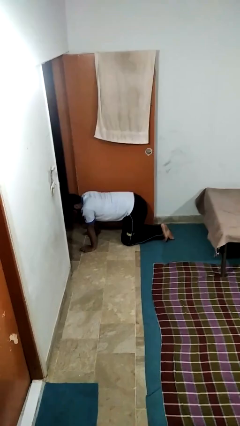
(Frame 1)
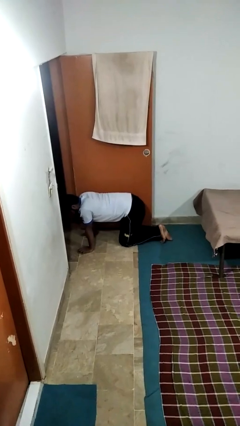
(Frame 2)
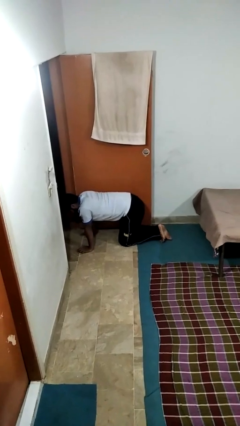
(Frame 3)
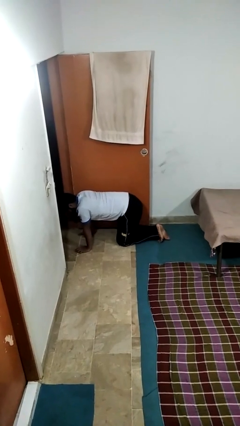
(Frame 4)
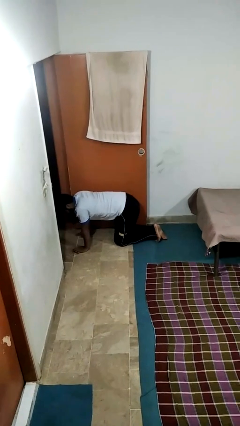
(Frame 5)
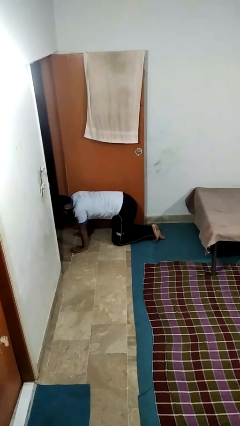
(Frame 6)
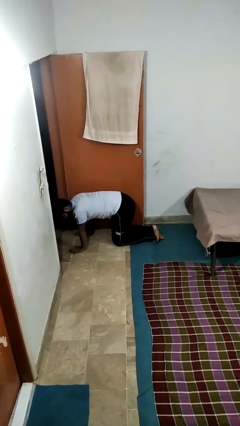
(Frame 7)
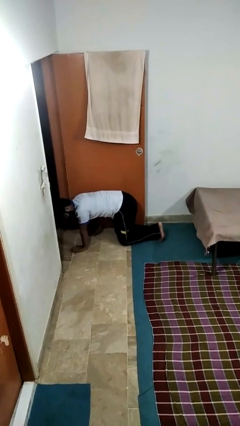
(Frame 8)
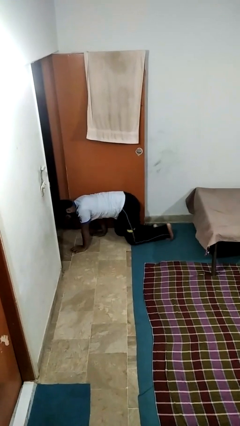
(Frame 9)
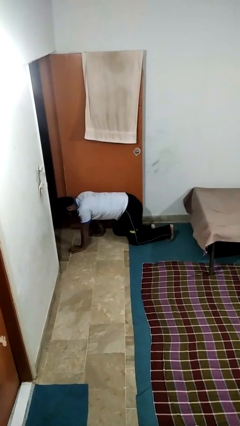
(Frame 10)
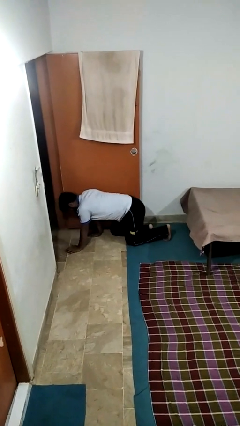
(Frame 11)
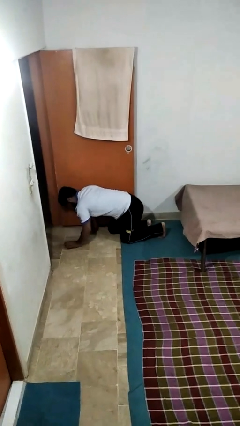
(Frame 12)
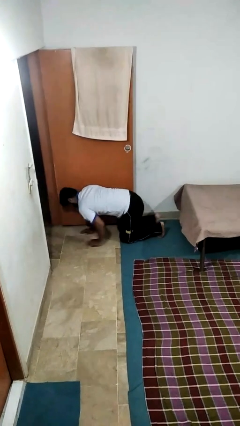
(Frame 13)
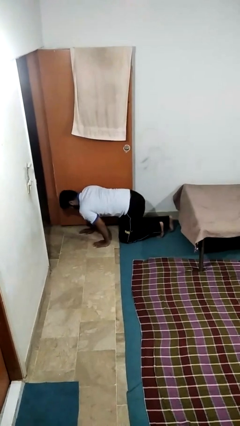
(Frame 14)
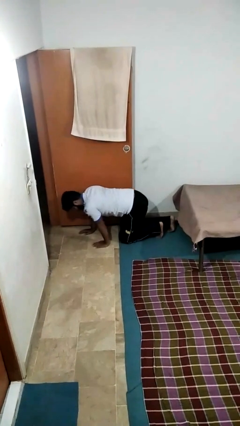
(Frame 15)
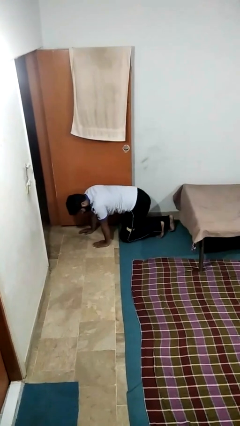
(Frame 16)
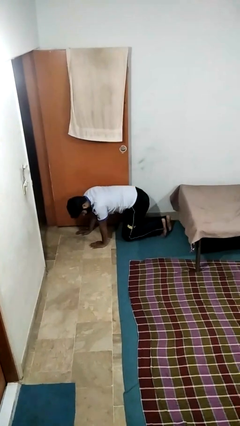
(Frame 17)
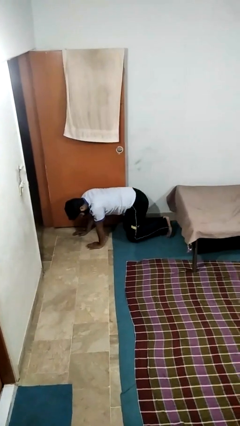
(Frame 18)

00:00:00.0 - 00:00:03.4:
person crawls

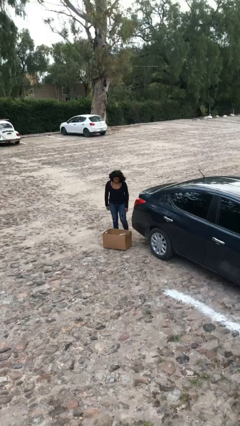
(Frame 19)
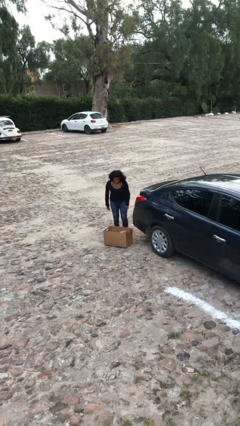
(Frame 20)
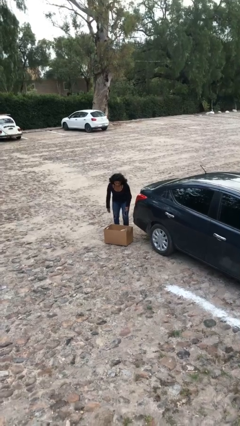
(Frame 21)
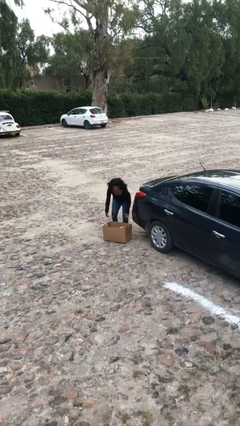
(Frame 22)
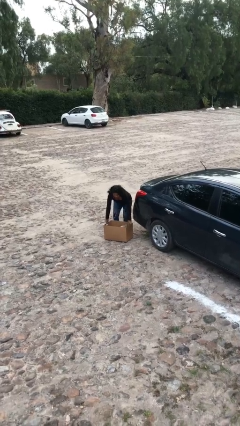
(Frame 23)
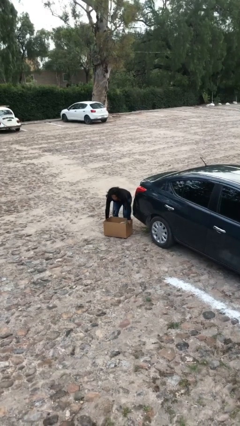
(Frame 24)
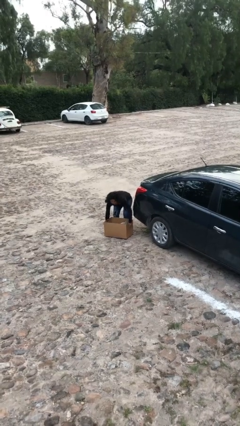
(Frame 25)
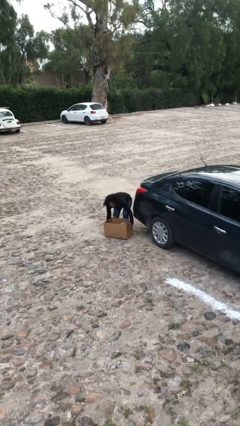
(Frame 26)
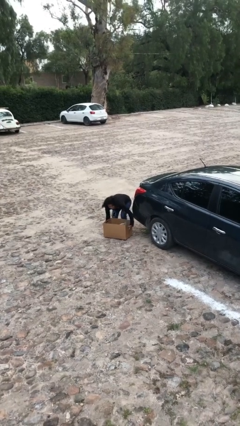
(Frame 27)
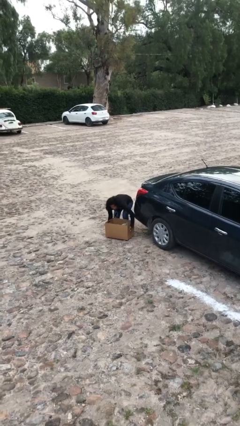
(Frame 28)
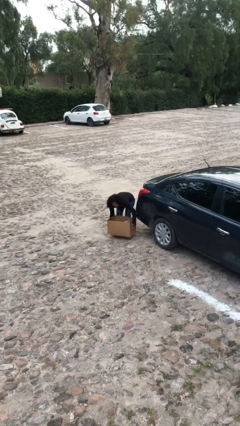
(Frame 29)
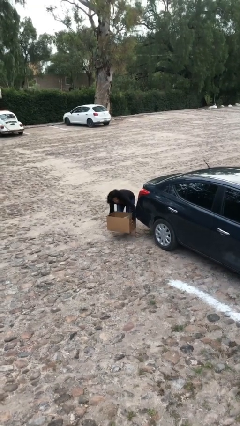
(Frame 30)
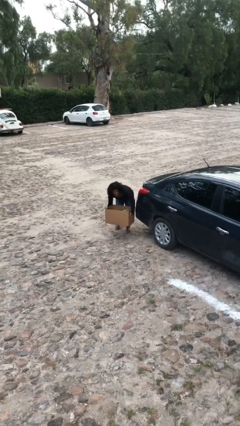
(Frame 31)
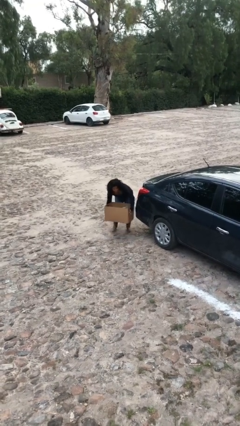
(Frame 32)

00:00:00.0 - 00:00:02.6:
person picks up object from floor

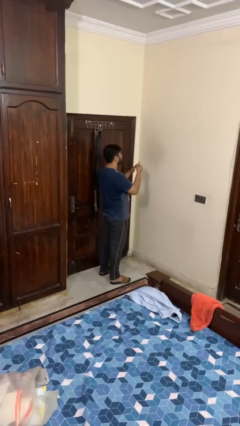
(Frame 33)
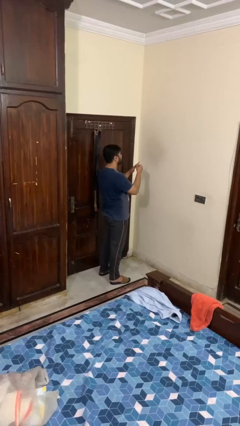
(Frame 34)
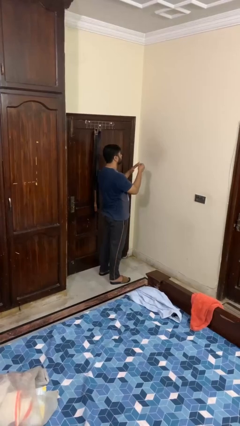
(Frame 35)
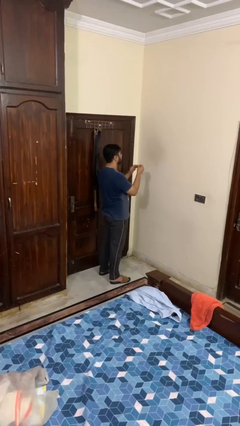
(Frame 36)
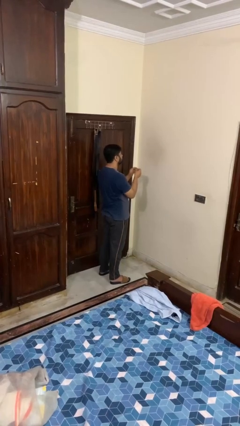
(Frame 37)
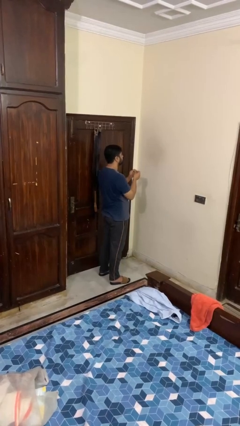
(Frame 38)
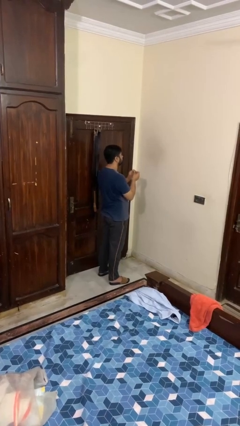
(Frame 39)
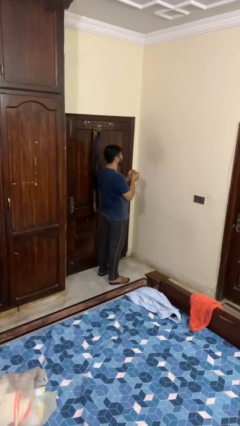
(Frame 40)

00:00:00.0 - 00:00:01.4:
person takes off ring

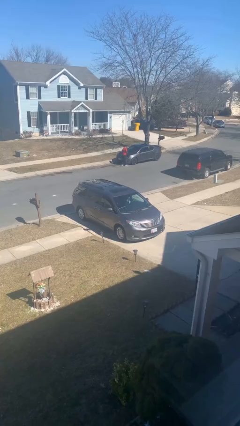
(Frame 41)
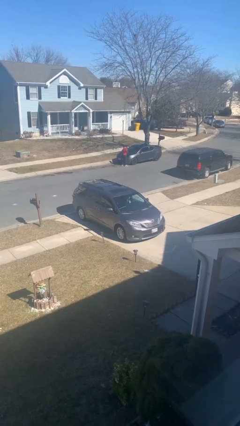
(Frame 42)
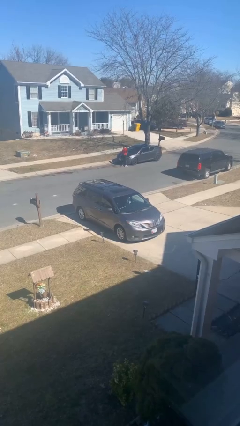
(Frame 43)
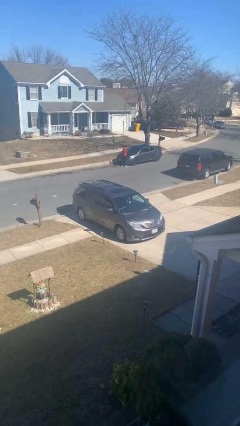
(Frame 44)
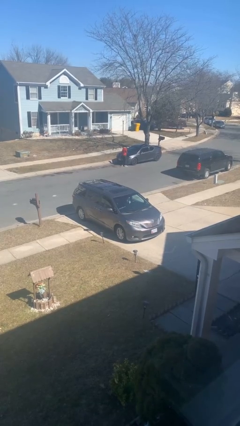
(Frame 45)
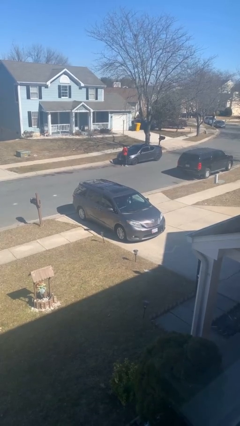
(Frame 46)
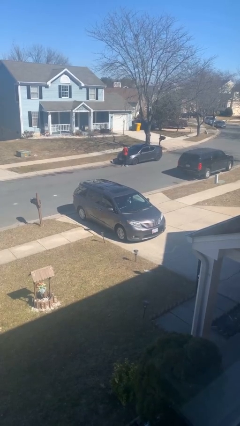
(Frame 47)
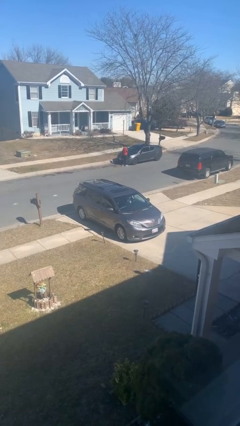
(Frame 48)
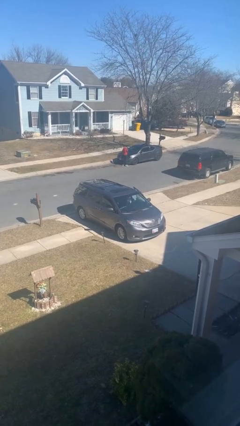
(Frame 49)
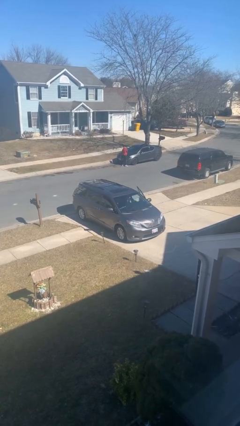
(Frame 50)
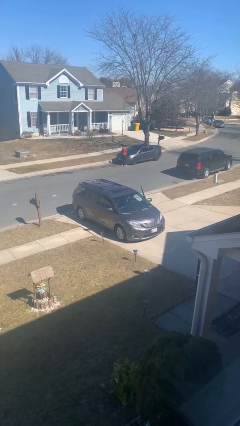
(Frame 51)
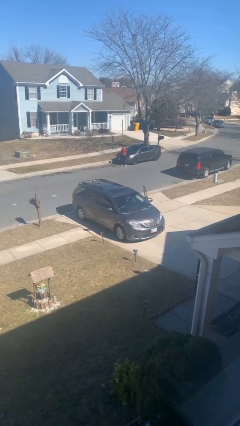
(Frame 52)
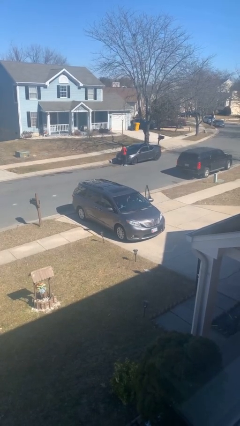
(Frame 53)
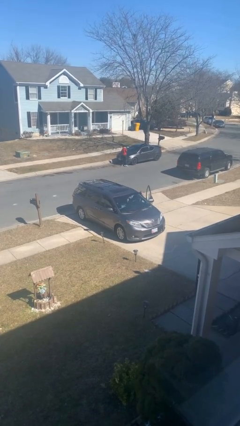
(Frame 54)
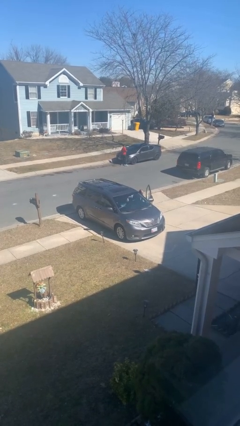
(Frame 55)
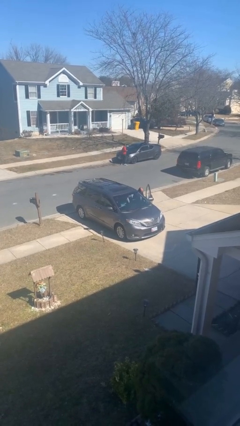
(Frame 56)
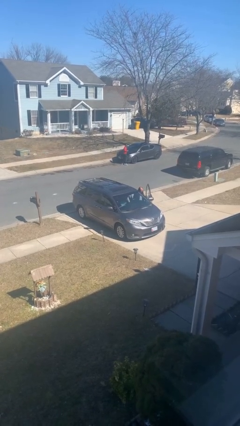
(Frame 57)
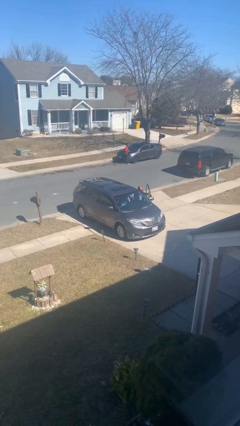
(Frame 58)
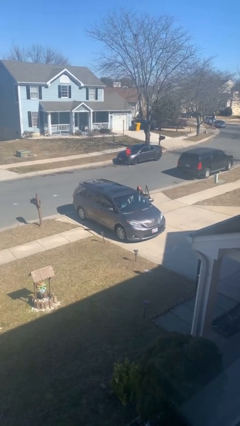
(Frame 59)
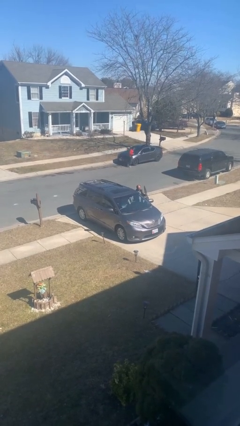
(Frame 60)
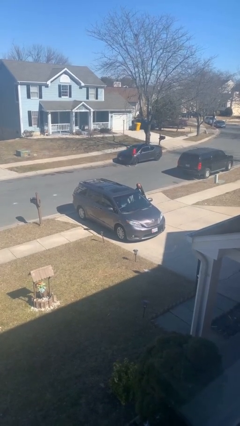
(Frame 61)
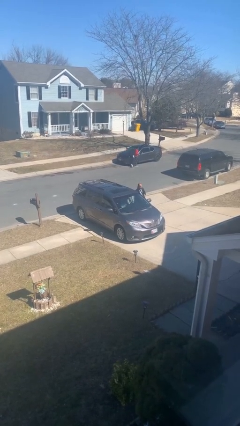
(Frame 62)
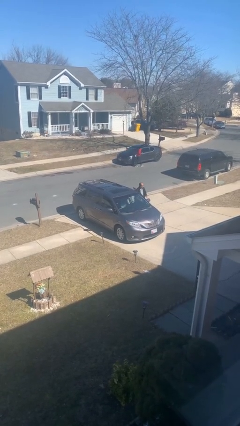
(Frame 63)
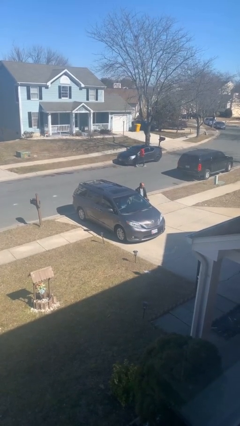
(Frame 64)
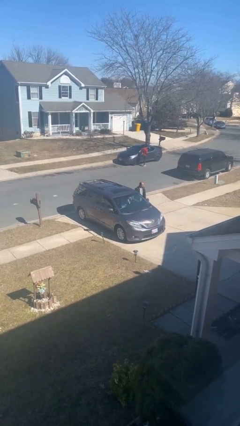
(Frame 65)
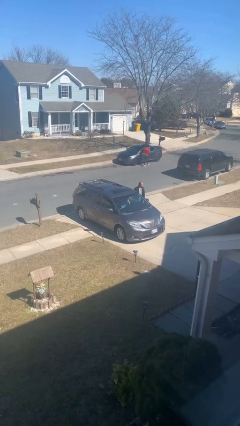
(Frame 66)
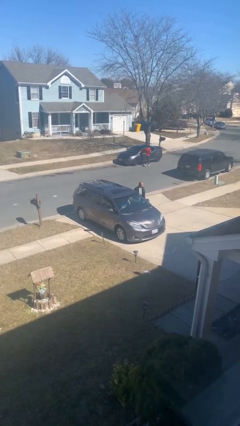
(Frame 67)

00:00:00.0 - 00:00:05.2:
car drops off person

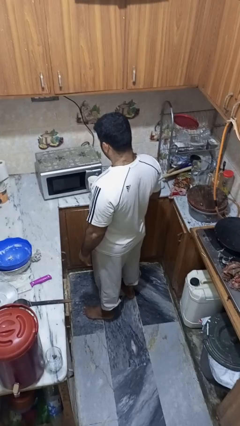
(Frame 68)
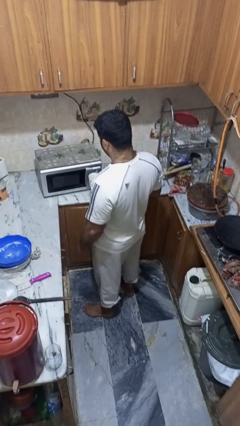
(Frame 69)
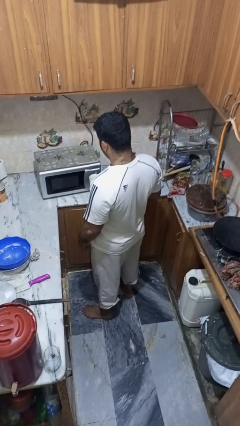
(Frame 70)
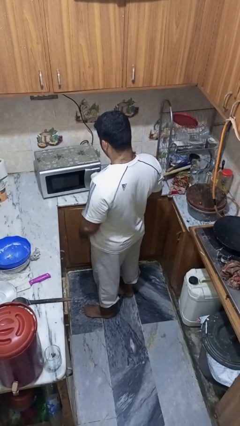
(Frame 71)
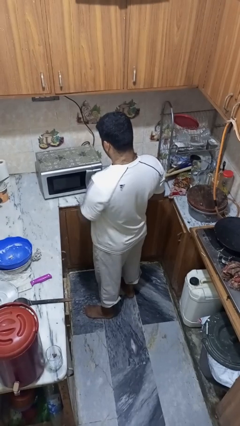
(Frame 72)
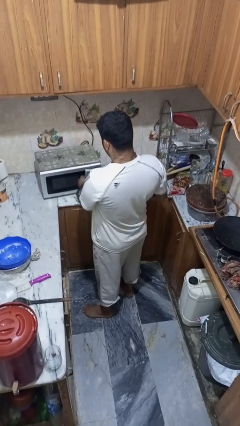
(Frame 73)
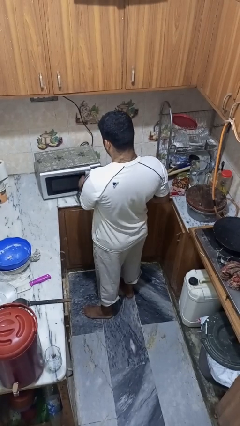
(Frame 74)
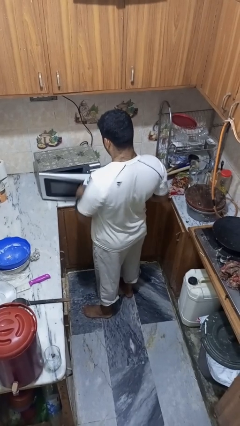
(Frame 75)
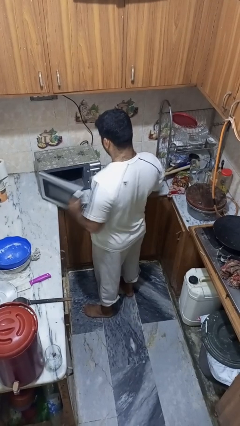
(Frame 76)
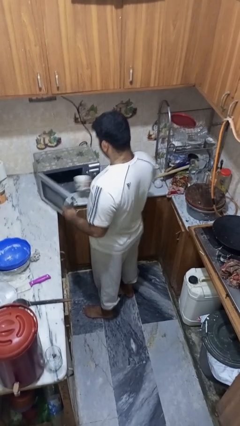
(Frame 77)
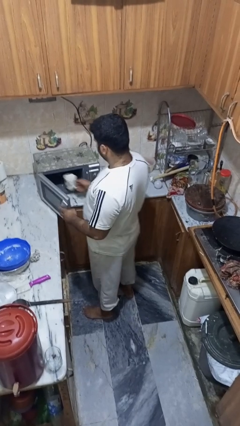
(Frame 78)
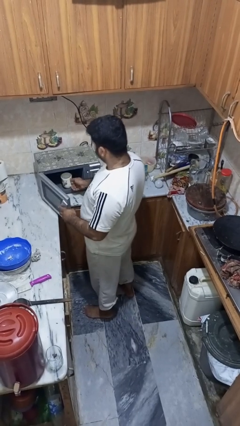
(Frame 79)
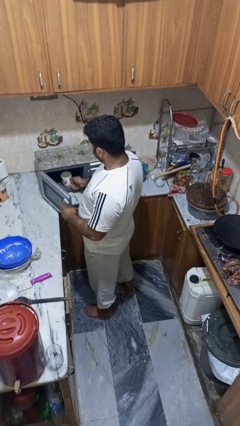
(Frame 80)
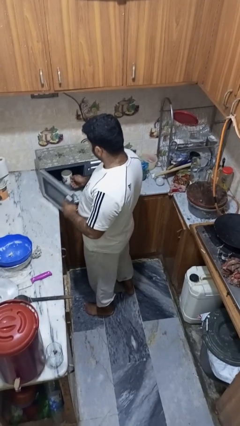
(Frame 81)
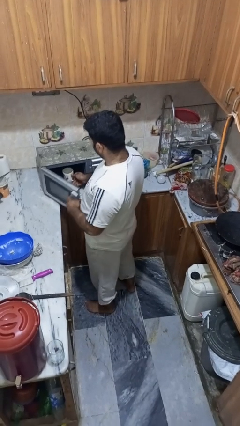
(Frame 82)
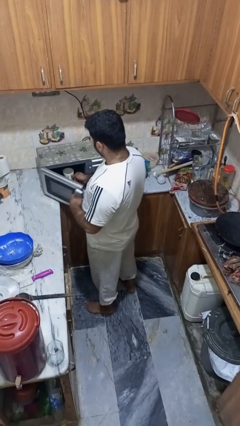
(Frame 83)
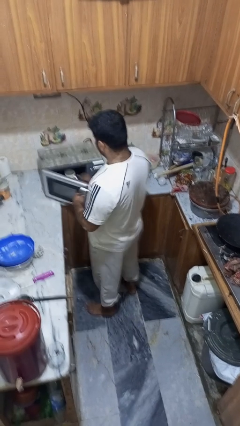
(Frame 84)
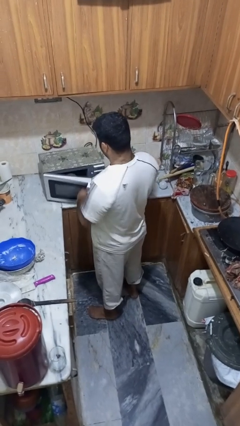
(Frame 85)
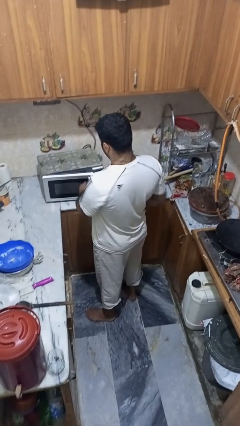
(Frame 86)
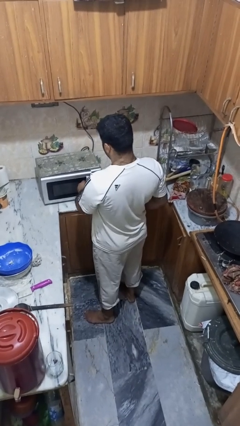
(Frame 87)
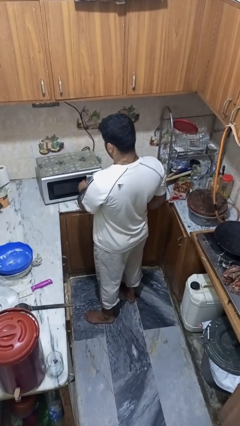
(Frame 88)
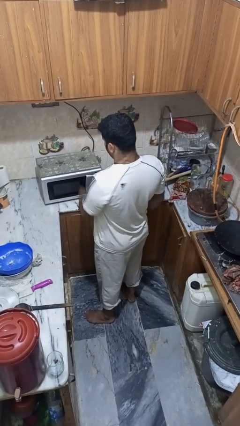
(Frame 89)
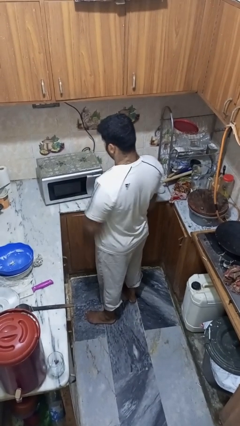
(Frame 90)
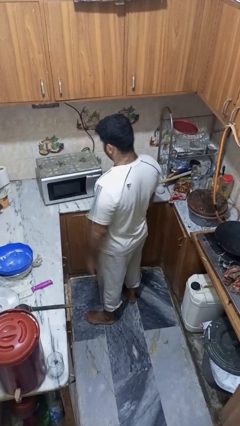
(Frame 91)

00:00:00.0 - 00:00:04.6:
person puts object into microwave
